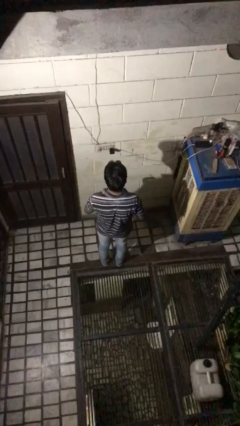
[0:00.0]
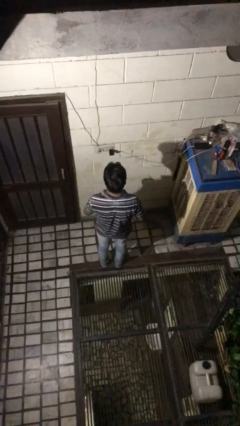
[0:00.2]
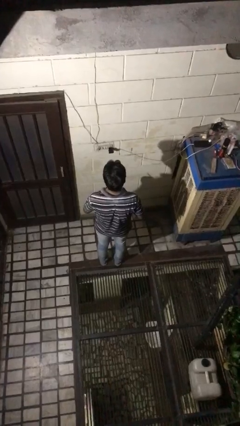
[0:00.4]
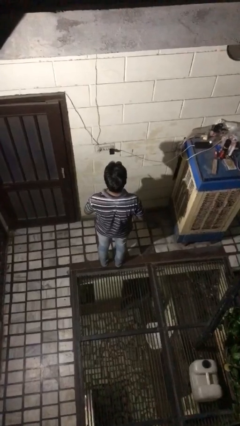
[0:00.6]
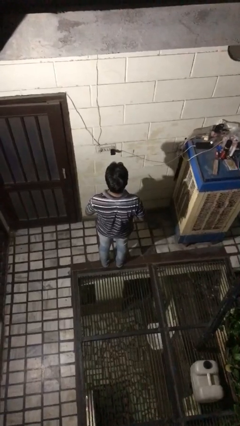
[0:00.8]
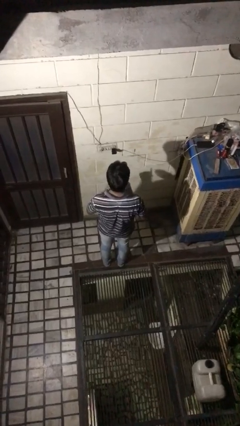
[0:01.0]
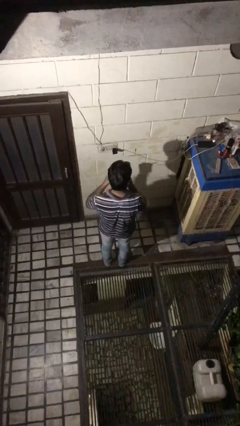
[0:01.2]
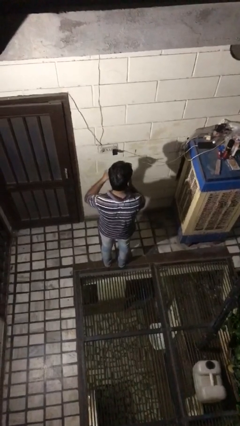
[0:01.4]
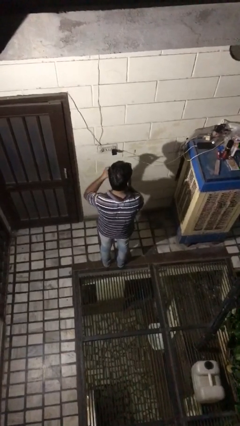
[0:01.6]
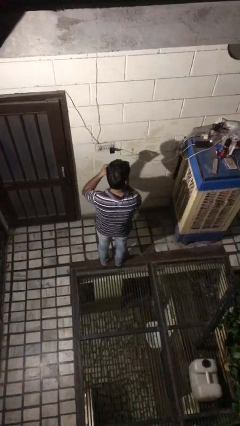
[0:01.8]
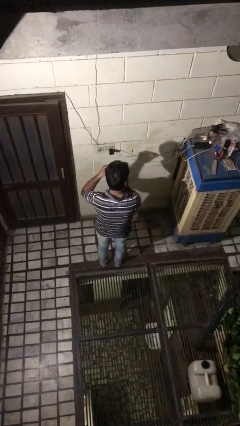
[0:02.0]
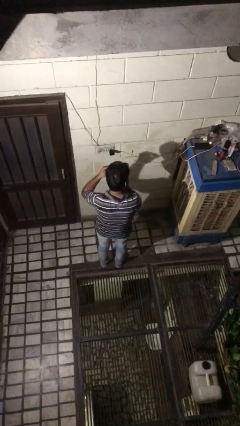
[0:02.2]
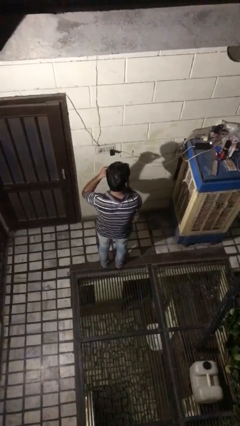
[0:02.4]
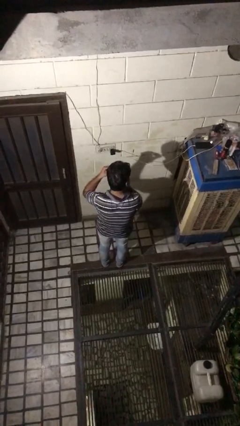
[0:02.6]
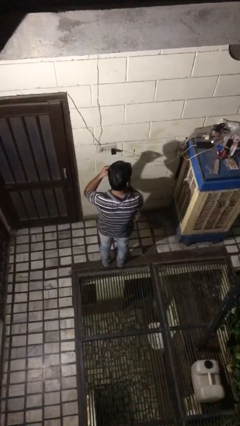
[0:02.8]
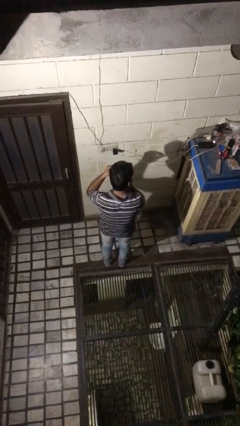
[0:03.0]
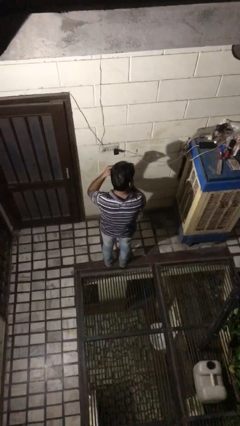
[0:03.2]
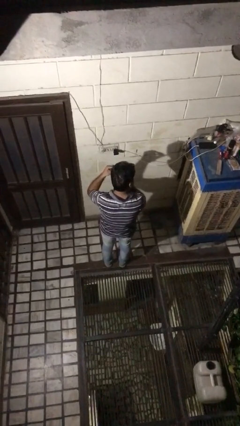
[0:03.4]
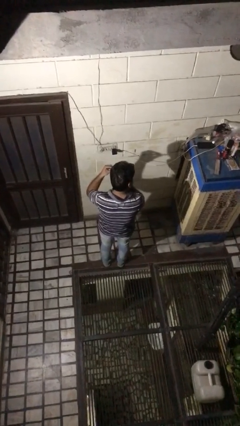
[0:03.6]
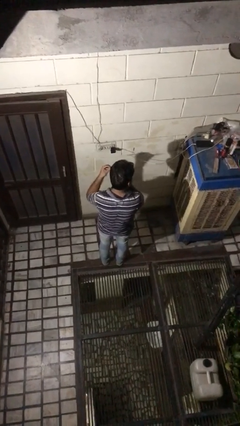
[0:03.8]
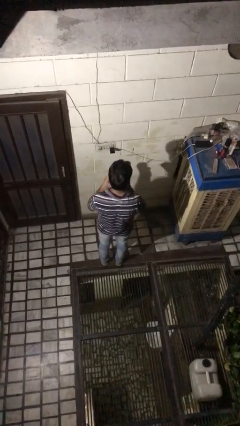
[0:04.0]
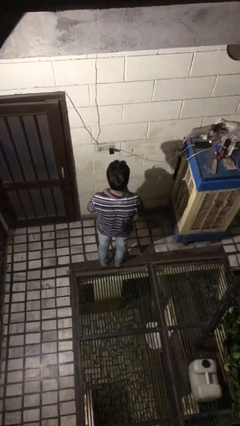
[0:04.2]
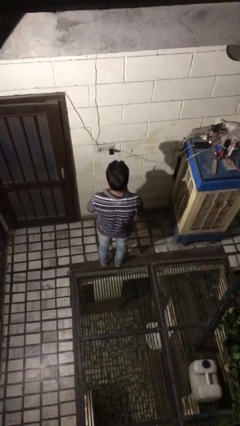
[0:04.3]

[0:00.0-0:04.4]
person applies eye makeup

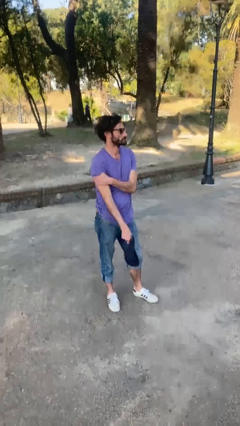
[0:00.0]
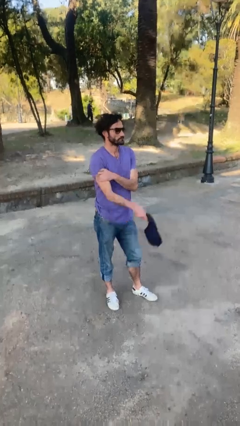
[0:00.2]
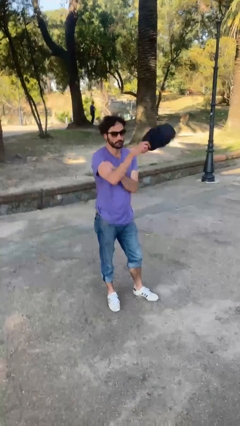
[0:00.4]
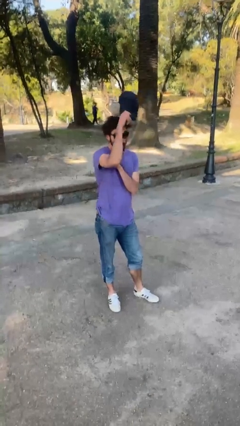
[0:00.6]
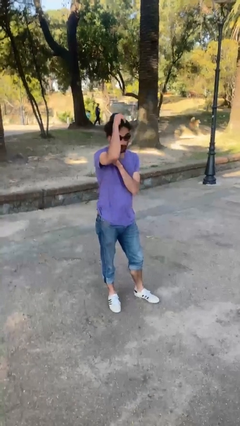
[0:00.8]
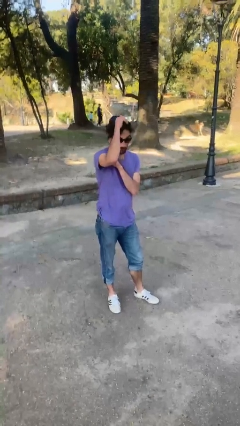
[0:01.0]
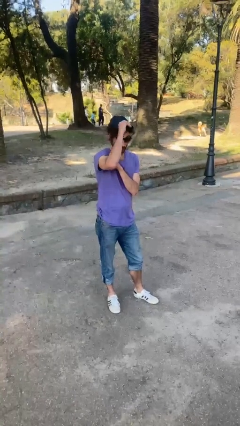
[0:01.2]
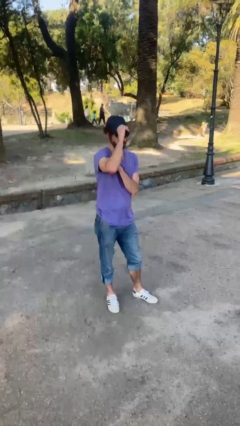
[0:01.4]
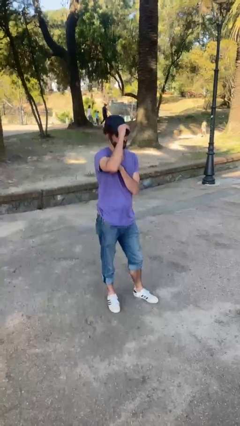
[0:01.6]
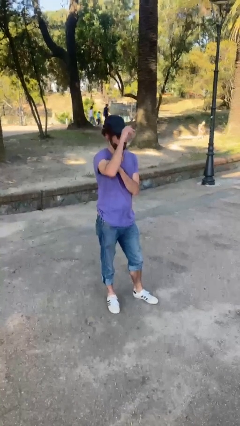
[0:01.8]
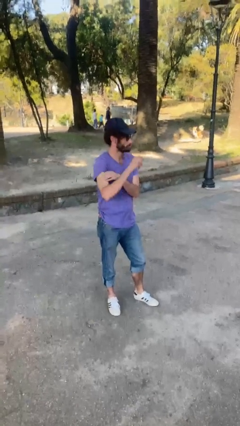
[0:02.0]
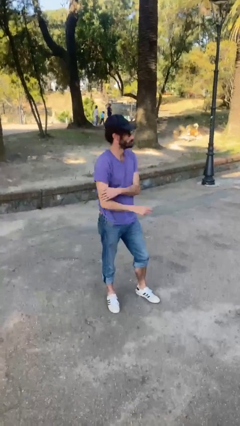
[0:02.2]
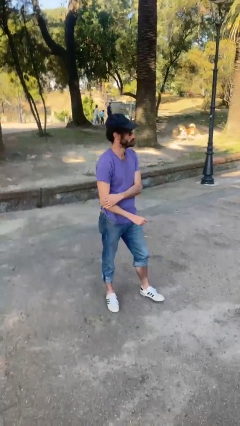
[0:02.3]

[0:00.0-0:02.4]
person puts on hat

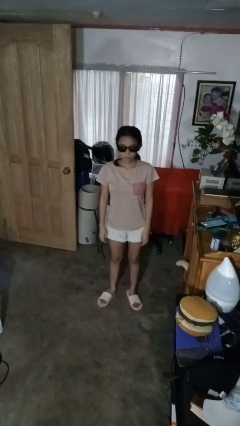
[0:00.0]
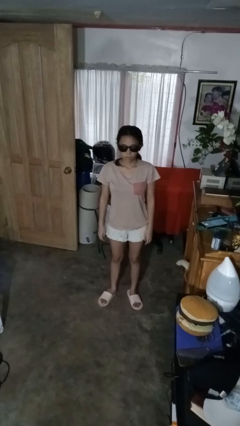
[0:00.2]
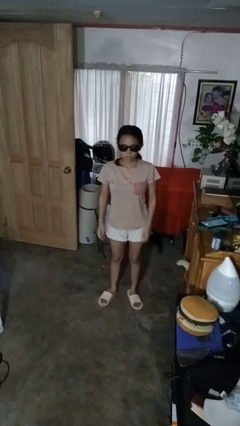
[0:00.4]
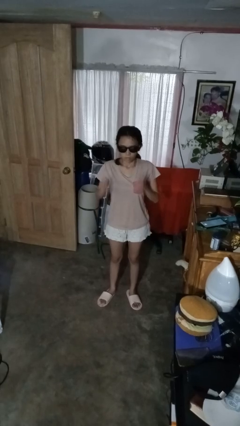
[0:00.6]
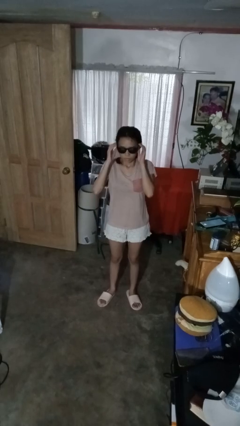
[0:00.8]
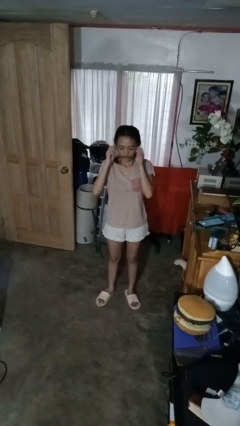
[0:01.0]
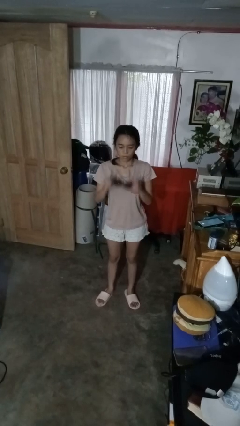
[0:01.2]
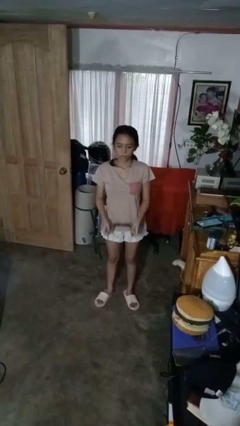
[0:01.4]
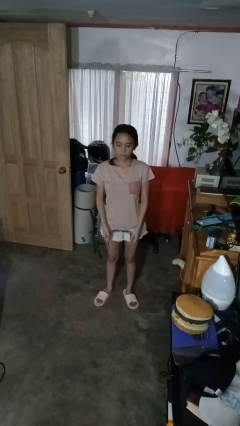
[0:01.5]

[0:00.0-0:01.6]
person takes off sunglasses

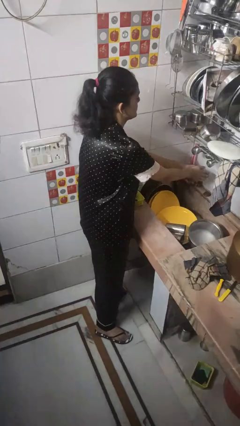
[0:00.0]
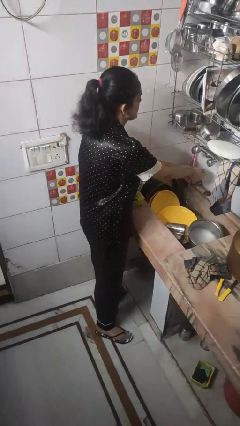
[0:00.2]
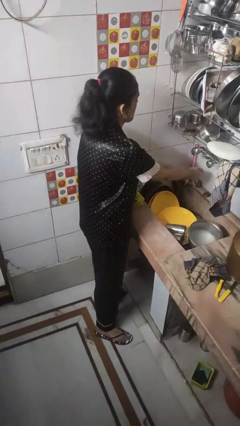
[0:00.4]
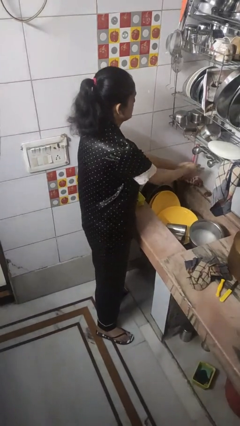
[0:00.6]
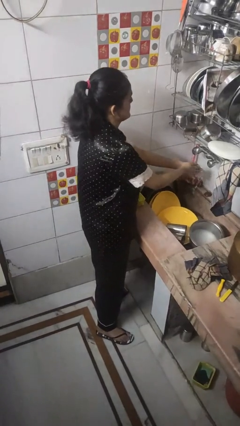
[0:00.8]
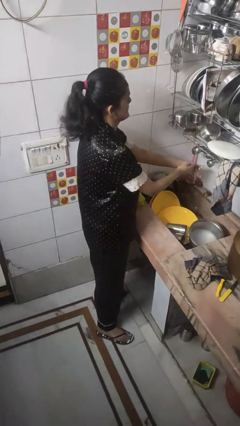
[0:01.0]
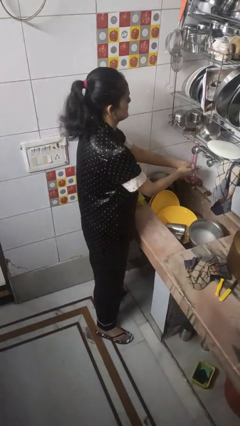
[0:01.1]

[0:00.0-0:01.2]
person washes hands

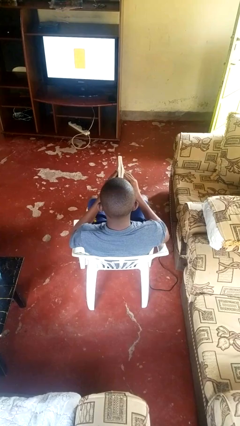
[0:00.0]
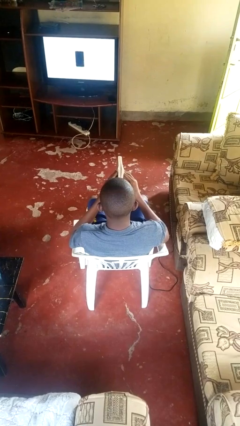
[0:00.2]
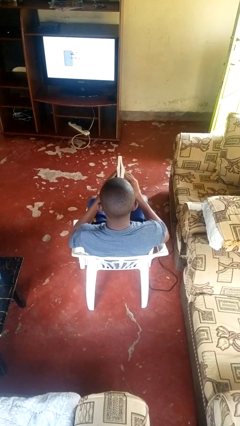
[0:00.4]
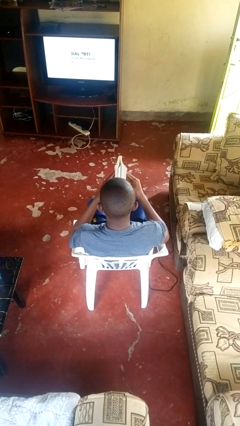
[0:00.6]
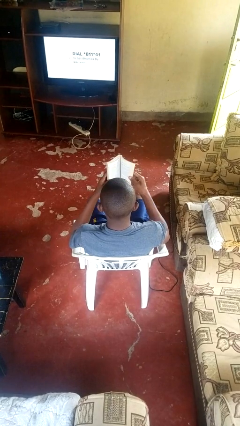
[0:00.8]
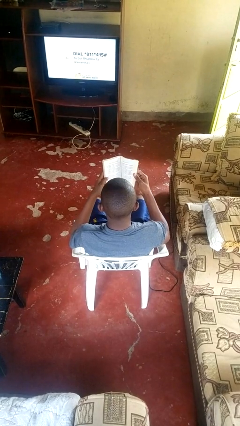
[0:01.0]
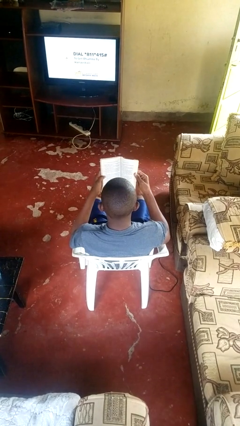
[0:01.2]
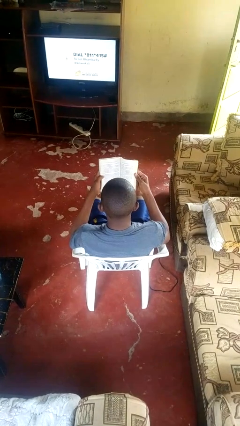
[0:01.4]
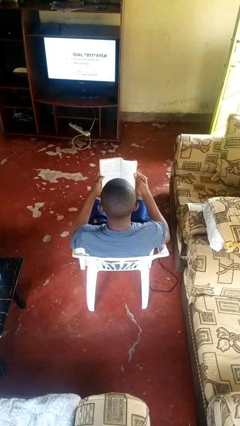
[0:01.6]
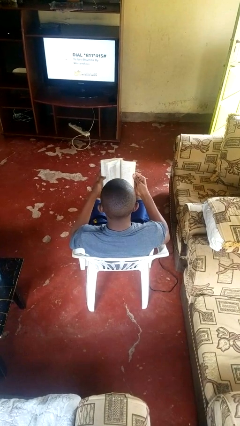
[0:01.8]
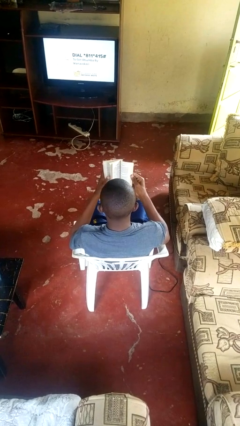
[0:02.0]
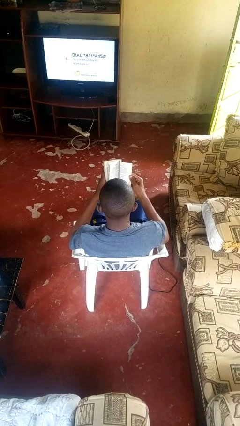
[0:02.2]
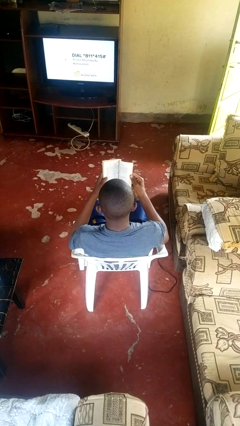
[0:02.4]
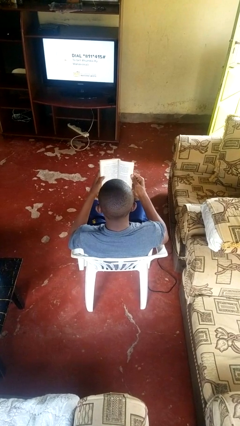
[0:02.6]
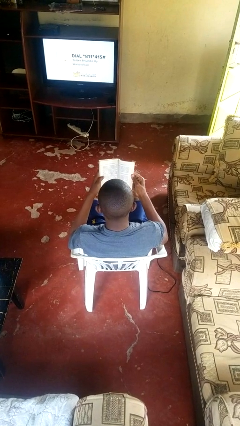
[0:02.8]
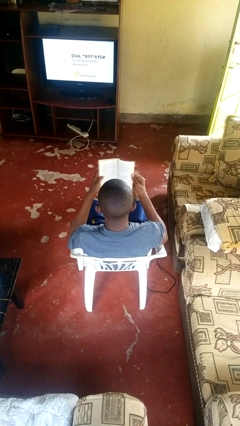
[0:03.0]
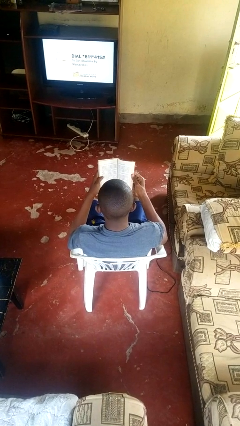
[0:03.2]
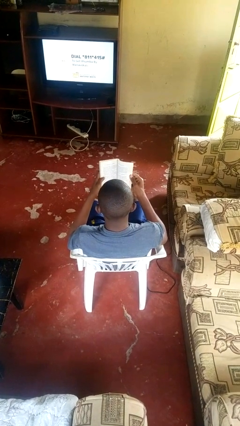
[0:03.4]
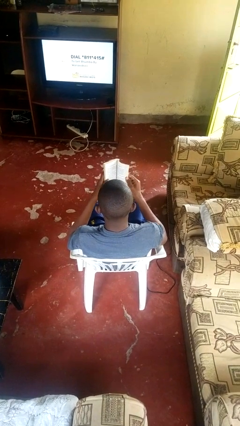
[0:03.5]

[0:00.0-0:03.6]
person reads book

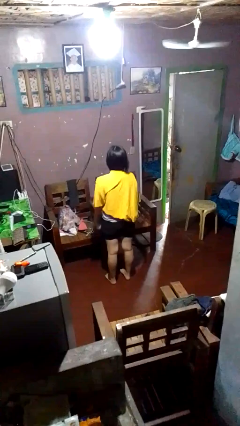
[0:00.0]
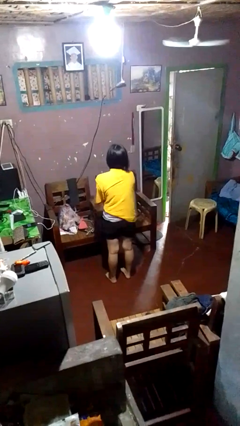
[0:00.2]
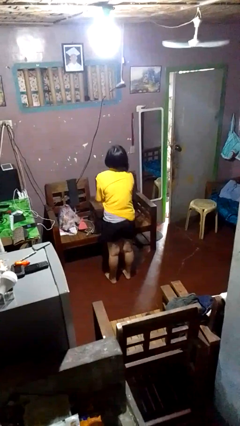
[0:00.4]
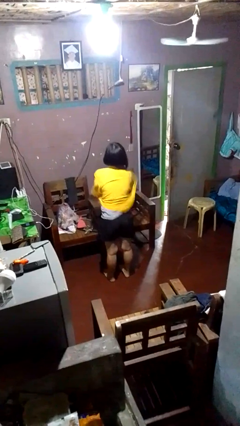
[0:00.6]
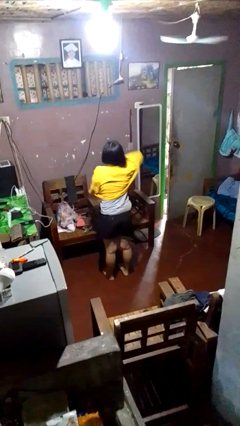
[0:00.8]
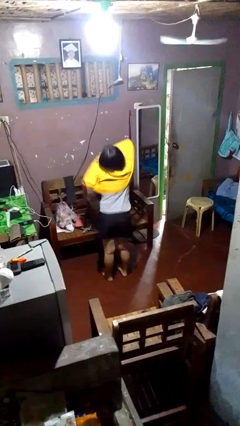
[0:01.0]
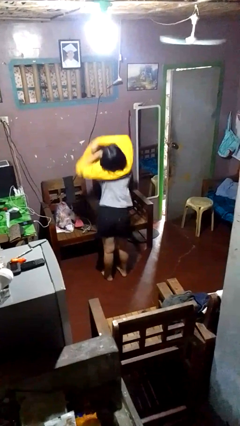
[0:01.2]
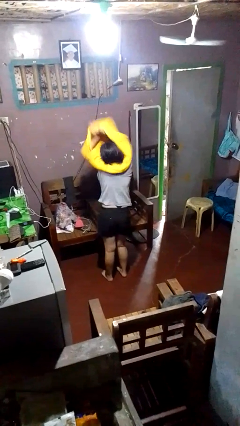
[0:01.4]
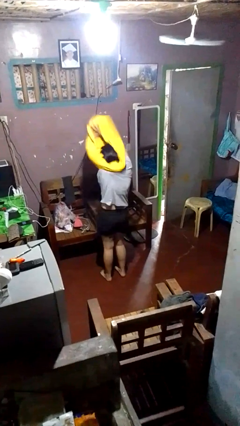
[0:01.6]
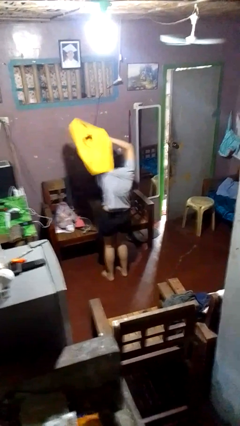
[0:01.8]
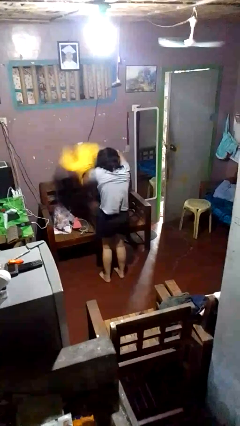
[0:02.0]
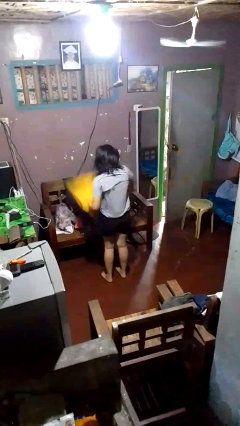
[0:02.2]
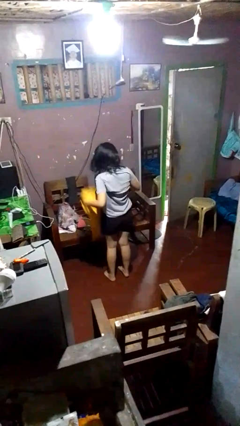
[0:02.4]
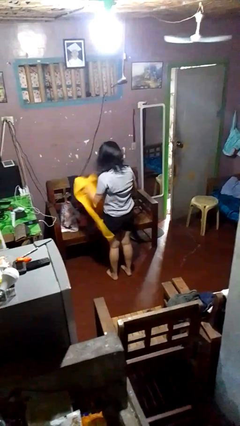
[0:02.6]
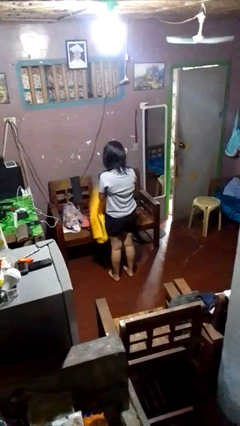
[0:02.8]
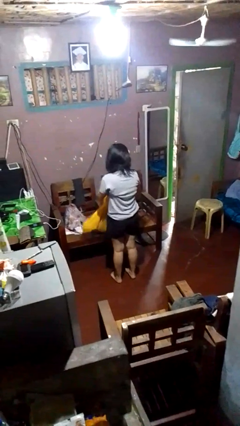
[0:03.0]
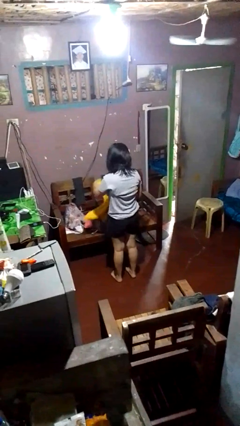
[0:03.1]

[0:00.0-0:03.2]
person takes off shirt

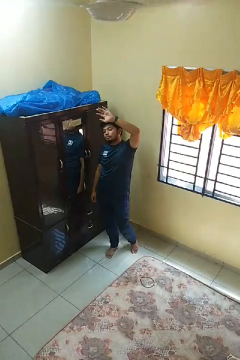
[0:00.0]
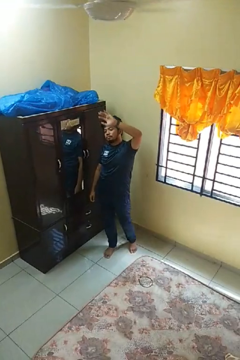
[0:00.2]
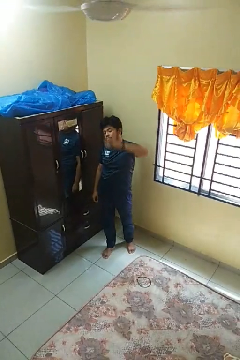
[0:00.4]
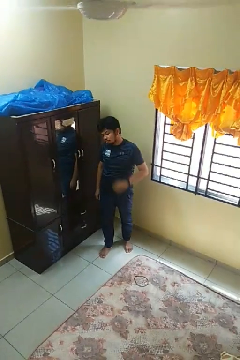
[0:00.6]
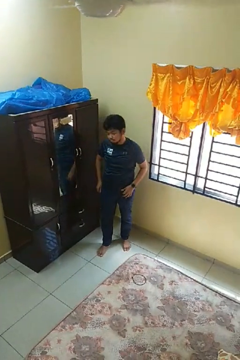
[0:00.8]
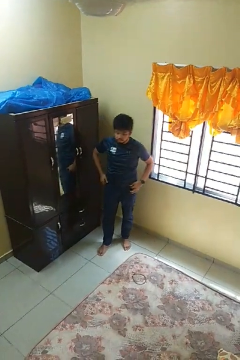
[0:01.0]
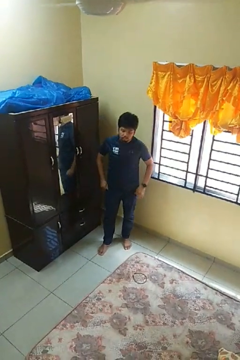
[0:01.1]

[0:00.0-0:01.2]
person gestures lower hand
